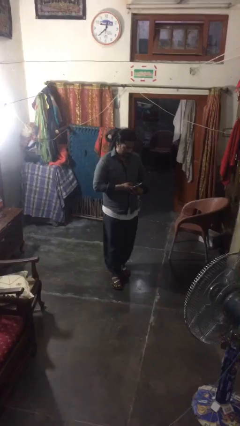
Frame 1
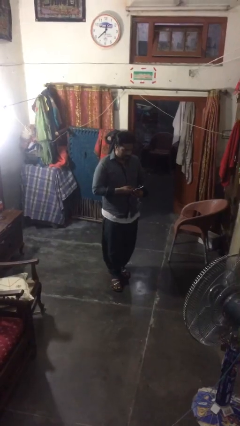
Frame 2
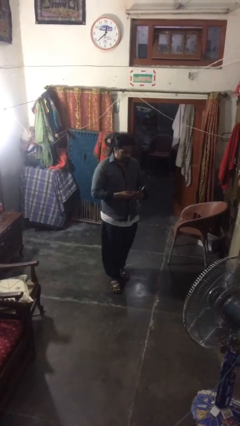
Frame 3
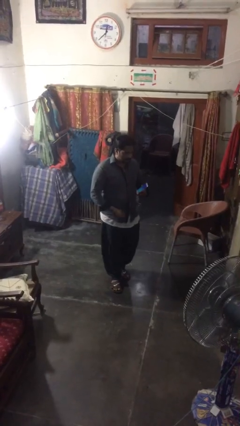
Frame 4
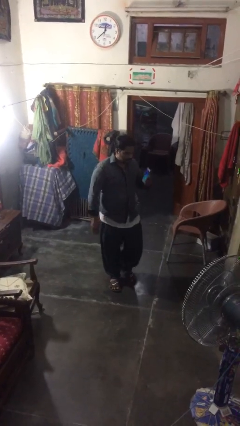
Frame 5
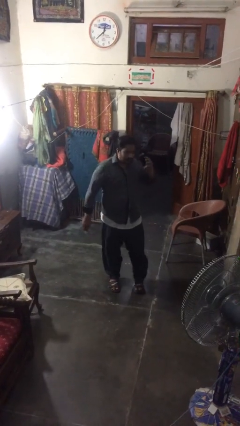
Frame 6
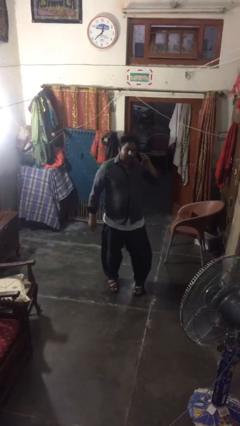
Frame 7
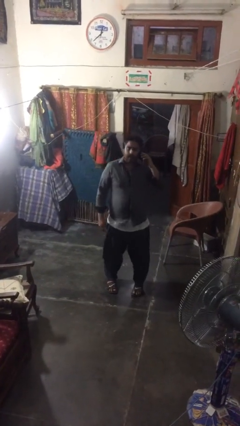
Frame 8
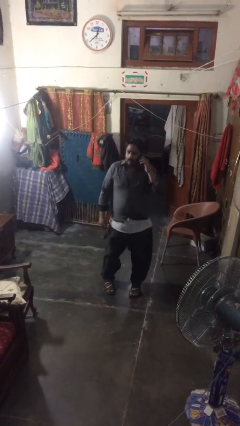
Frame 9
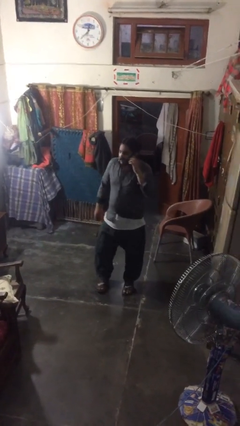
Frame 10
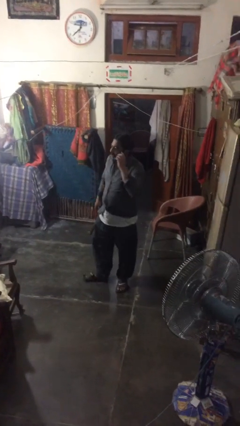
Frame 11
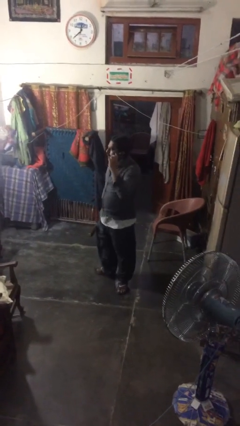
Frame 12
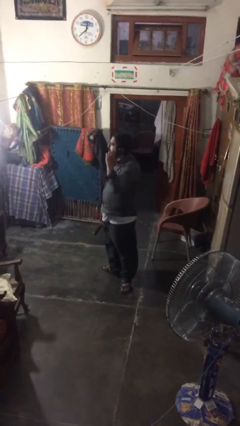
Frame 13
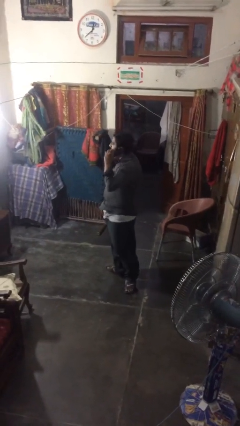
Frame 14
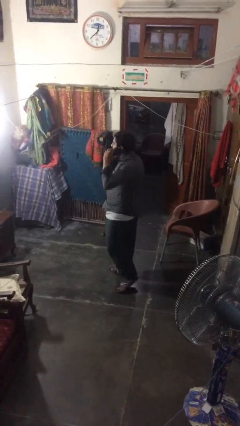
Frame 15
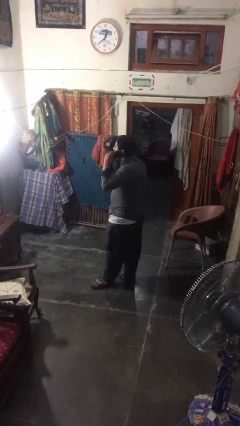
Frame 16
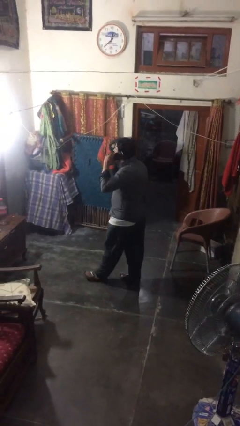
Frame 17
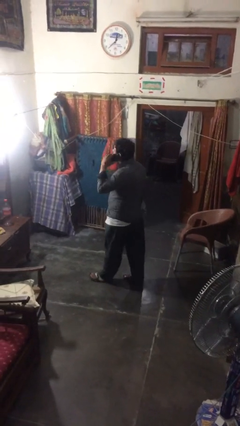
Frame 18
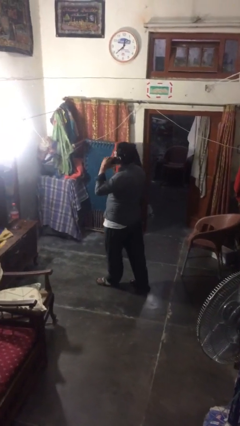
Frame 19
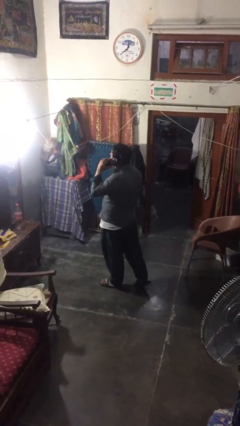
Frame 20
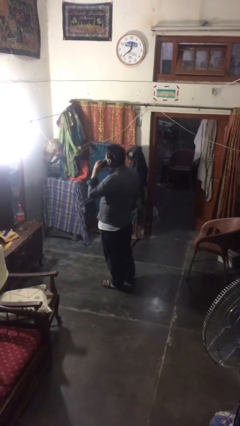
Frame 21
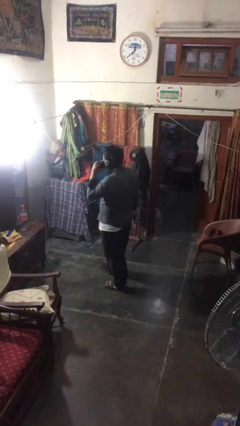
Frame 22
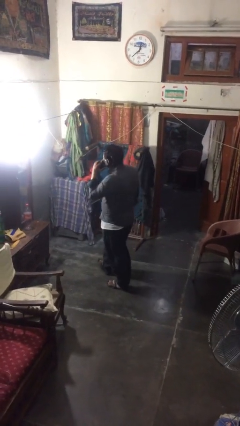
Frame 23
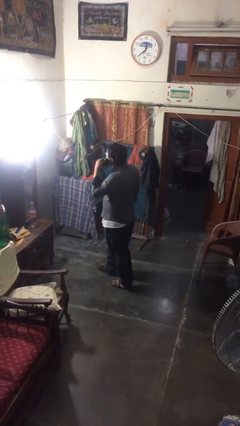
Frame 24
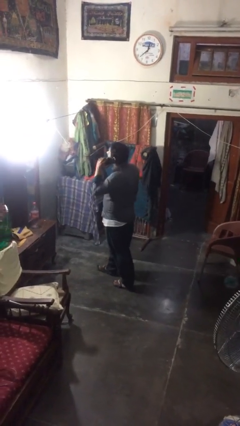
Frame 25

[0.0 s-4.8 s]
person talks on phone

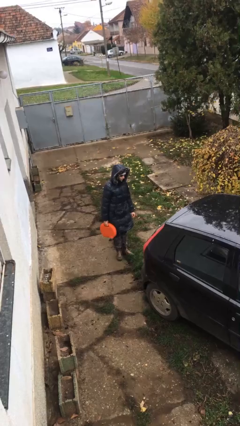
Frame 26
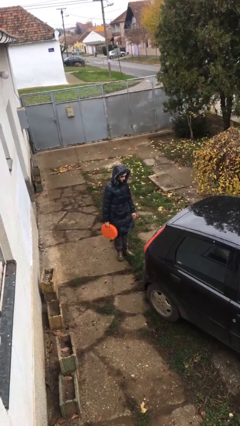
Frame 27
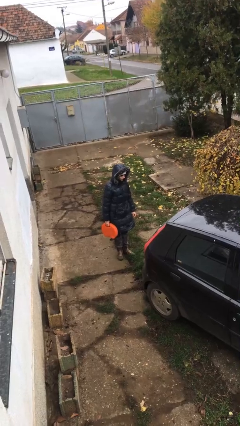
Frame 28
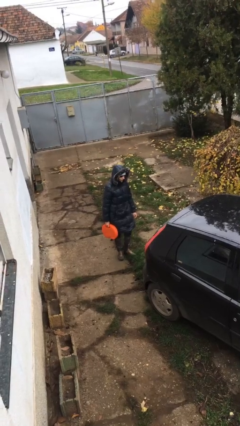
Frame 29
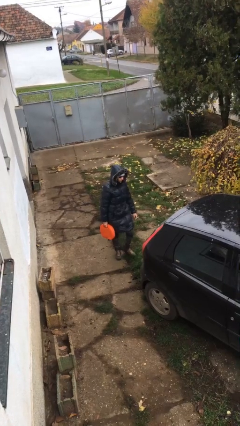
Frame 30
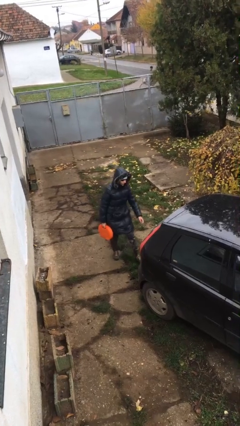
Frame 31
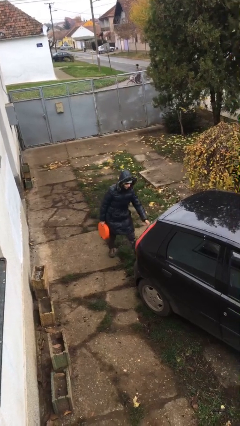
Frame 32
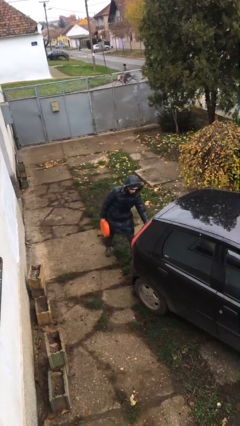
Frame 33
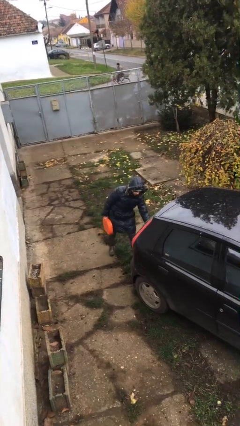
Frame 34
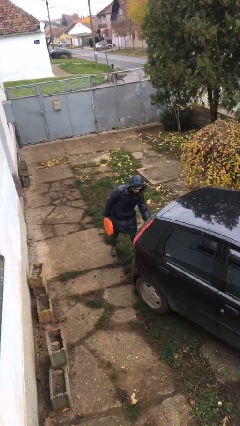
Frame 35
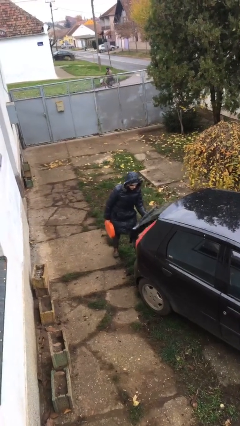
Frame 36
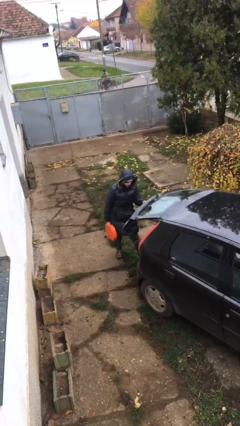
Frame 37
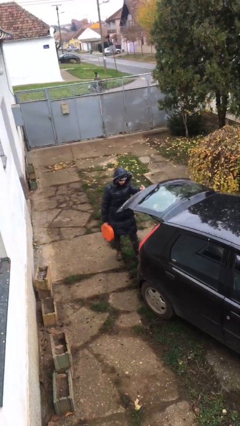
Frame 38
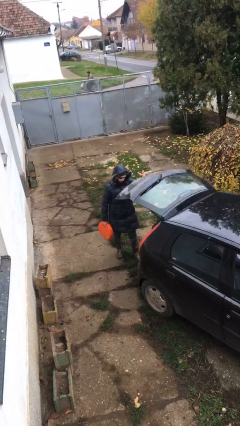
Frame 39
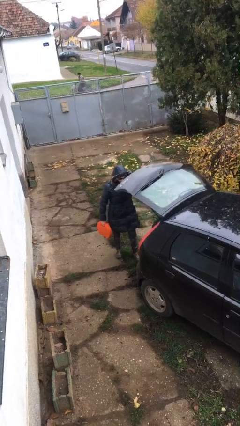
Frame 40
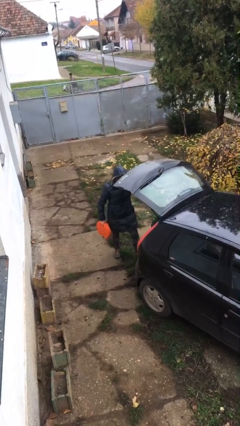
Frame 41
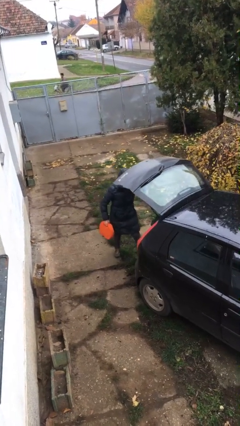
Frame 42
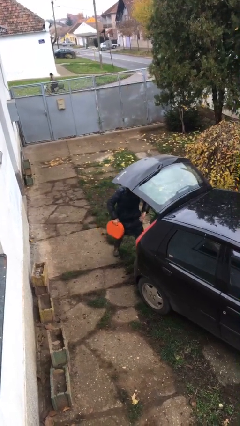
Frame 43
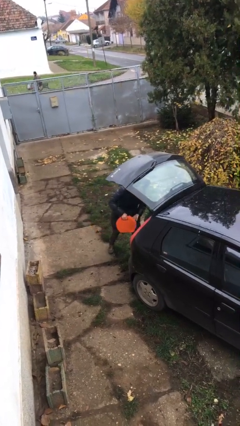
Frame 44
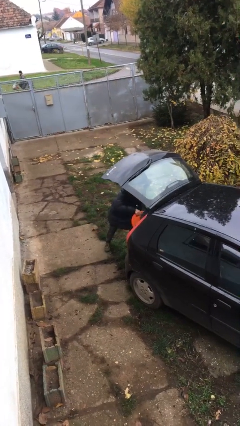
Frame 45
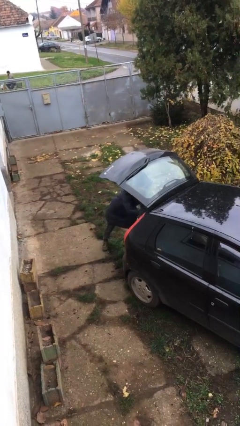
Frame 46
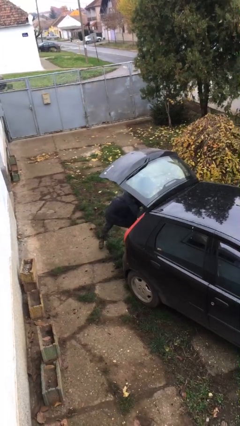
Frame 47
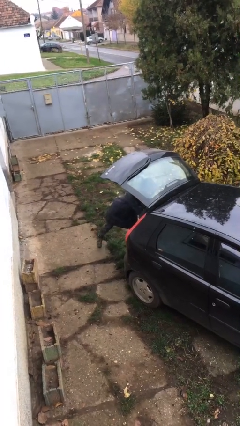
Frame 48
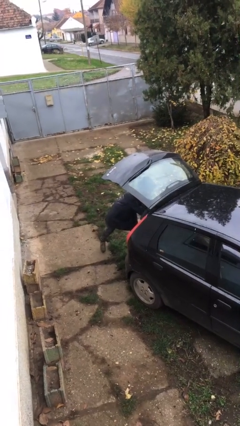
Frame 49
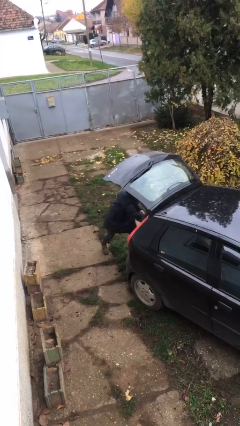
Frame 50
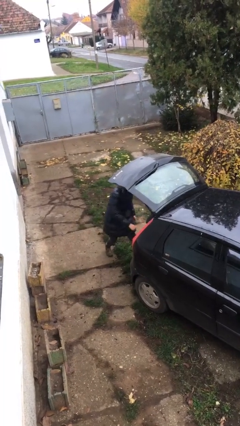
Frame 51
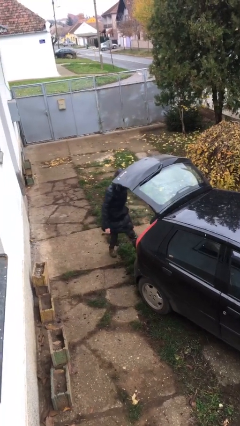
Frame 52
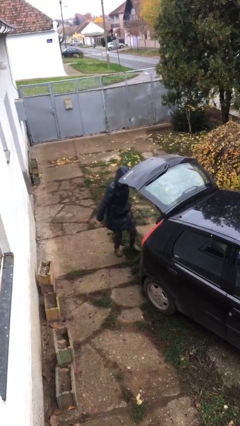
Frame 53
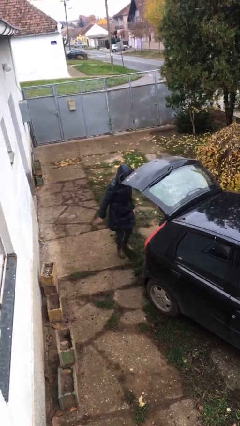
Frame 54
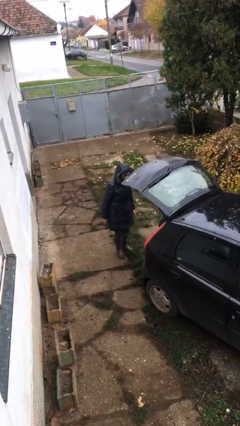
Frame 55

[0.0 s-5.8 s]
person loads car

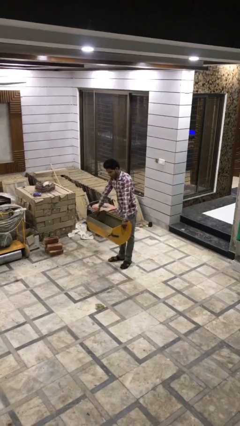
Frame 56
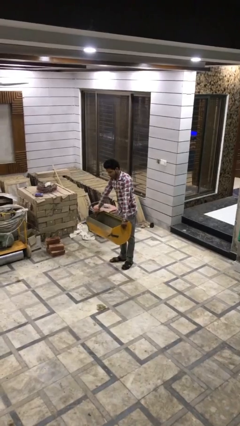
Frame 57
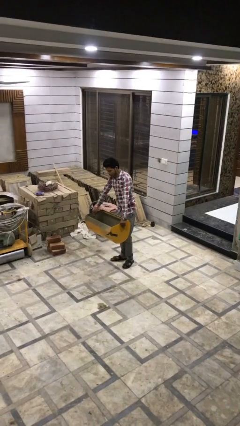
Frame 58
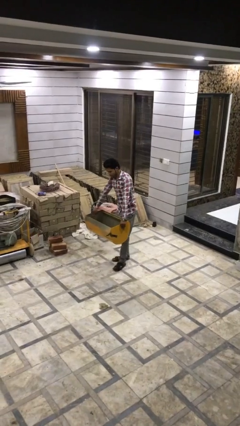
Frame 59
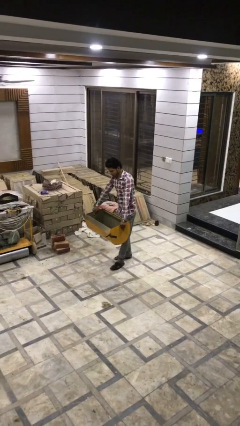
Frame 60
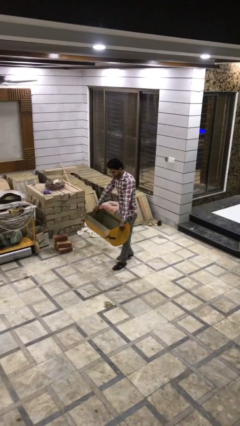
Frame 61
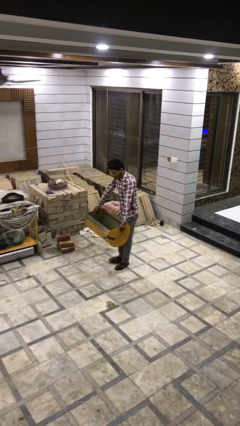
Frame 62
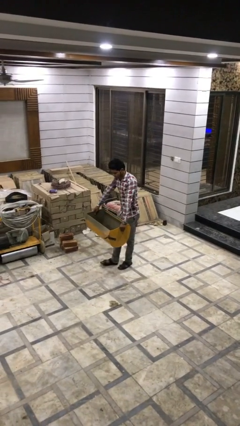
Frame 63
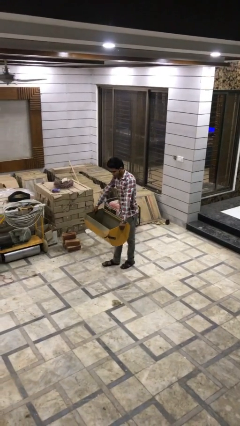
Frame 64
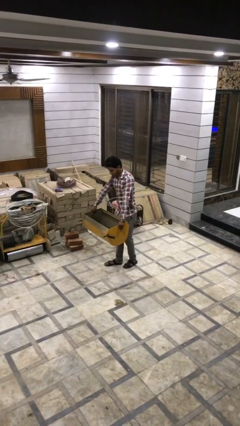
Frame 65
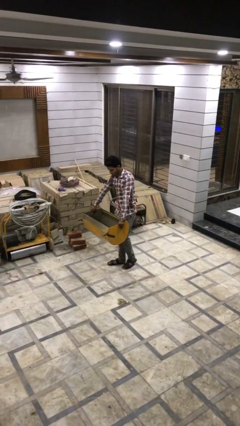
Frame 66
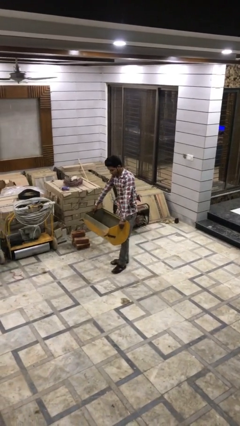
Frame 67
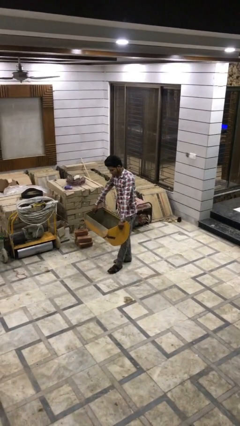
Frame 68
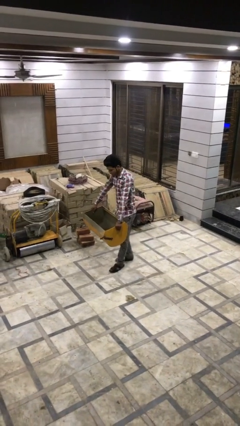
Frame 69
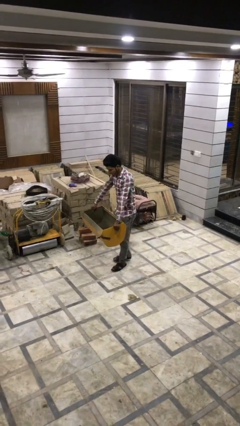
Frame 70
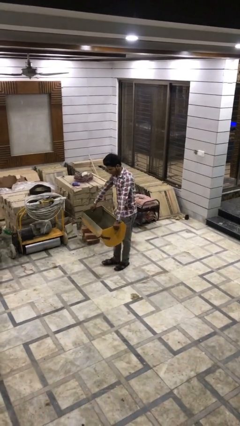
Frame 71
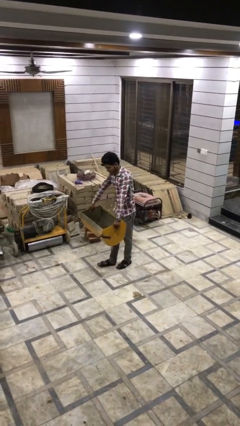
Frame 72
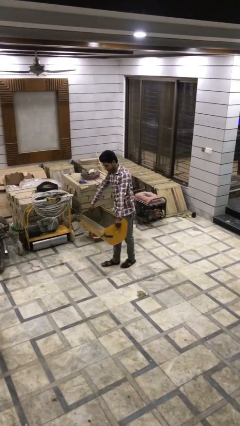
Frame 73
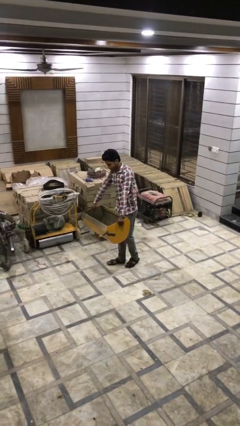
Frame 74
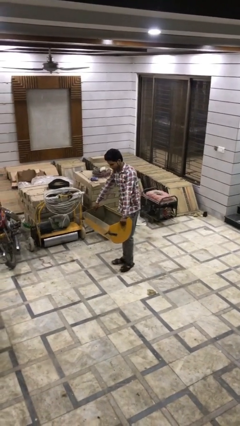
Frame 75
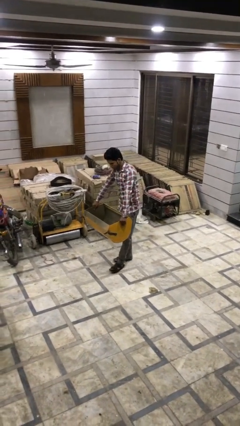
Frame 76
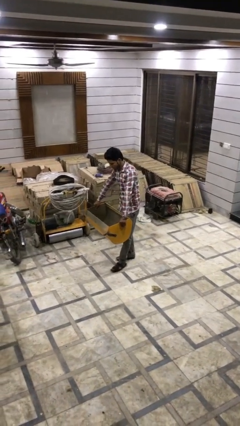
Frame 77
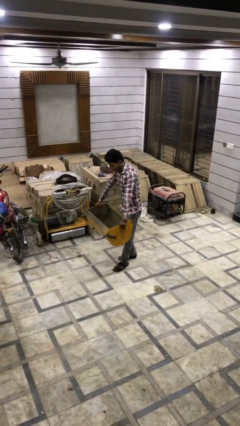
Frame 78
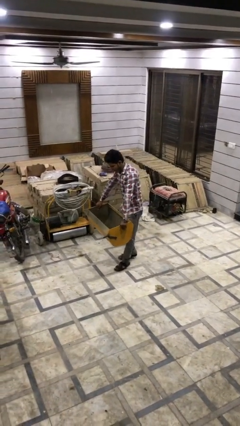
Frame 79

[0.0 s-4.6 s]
person carries heavy object

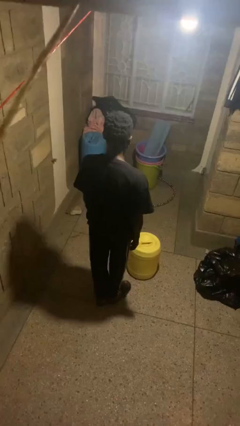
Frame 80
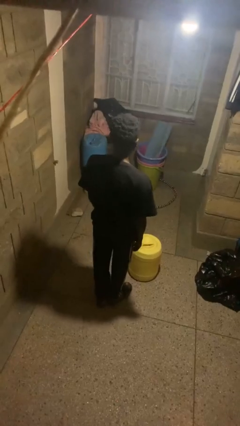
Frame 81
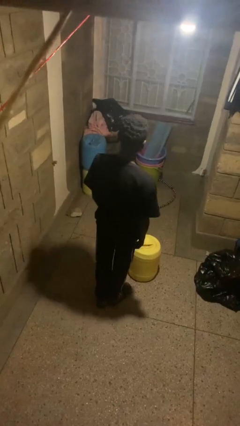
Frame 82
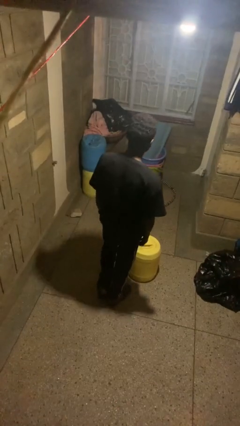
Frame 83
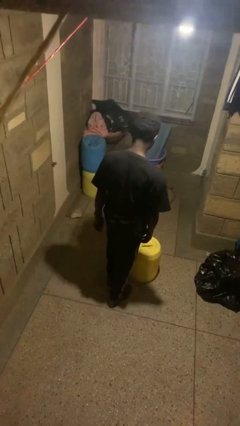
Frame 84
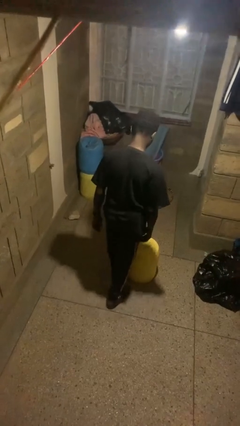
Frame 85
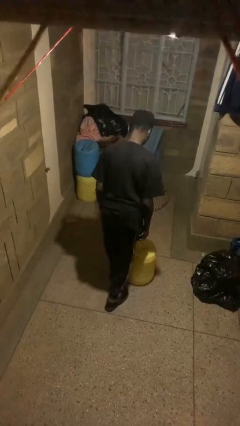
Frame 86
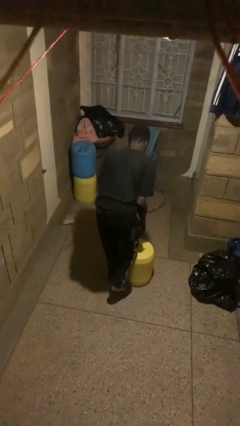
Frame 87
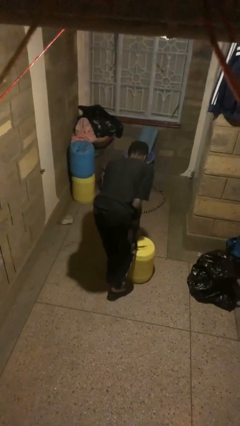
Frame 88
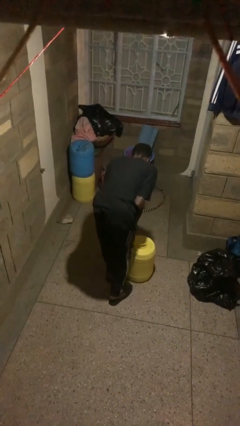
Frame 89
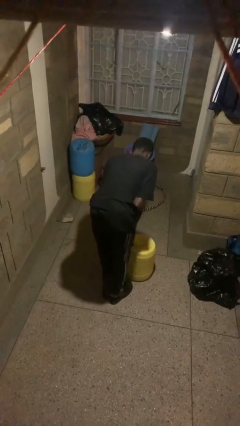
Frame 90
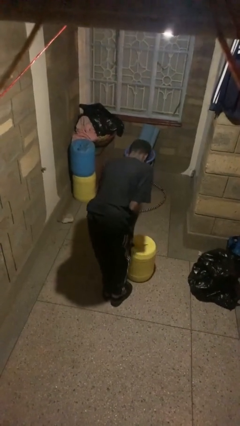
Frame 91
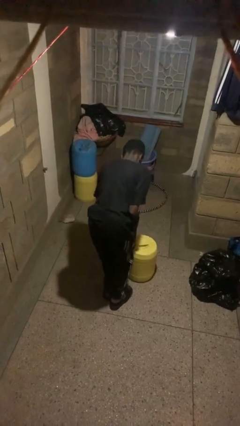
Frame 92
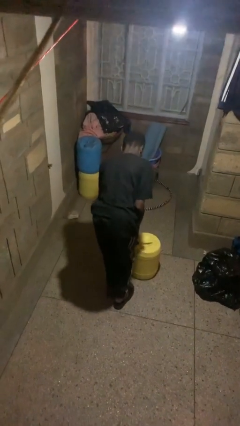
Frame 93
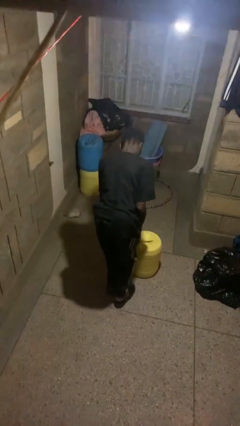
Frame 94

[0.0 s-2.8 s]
person stubs toe

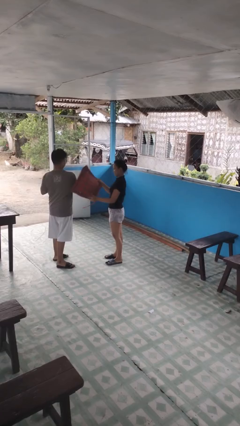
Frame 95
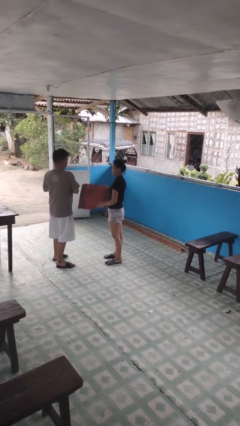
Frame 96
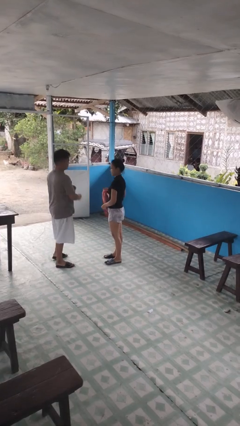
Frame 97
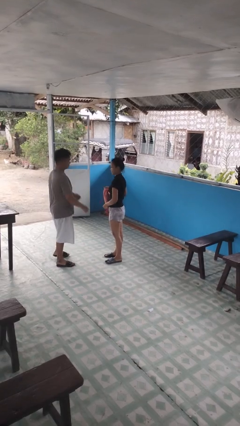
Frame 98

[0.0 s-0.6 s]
person hits person with pillow
